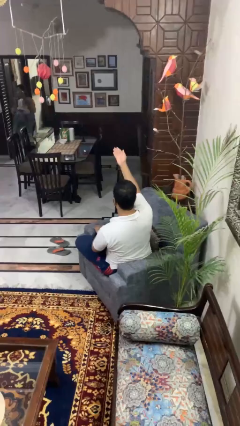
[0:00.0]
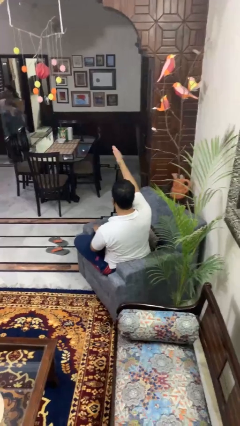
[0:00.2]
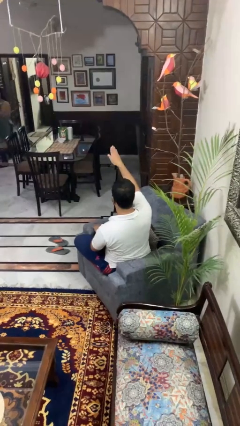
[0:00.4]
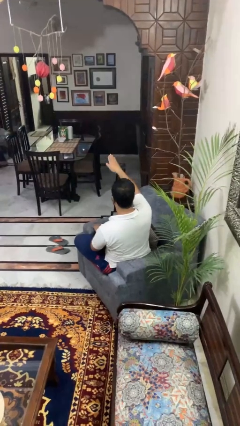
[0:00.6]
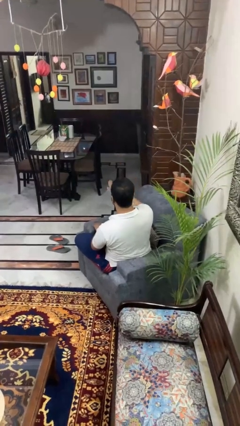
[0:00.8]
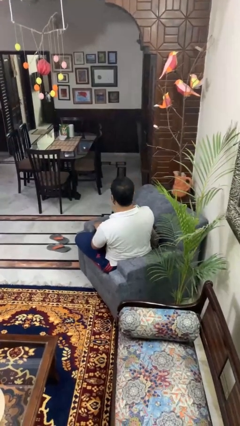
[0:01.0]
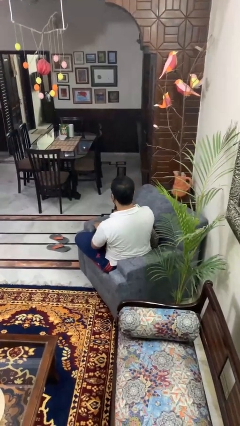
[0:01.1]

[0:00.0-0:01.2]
person gestures swipe down

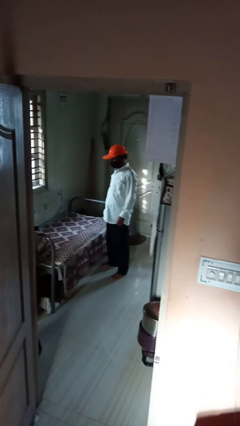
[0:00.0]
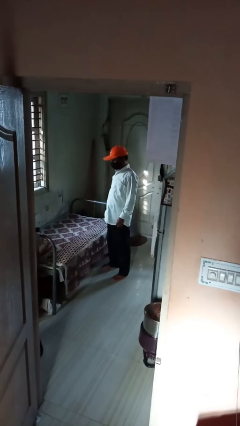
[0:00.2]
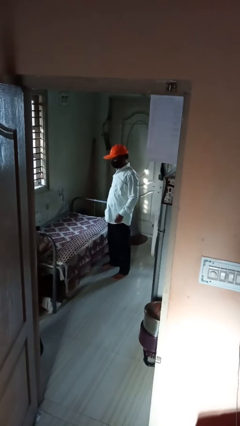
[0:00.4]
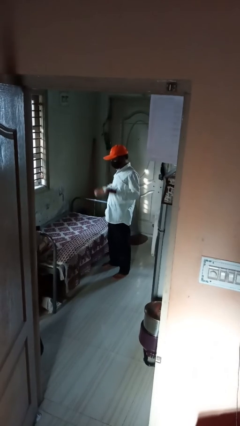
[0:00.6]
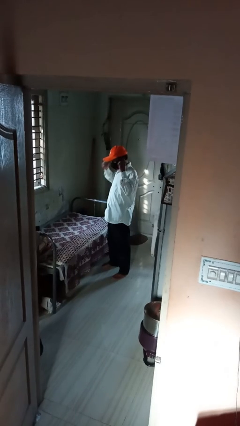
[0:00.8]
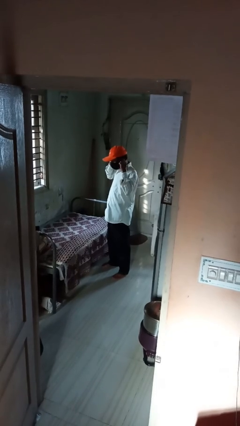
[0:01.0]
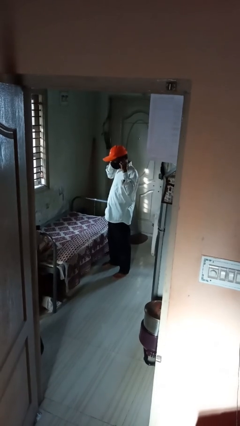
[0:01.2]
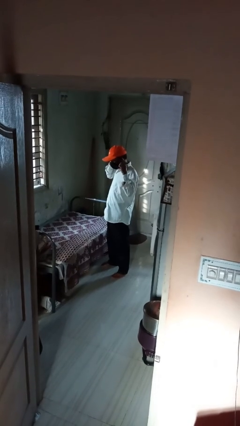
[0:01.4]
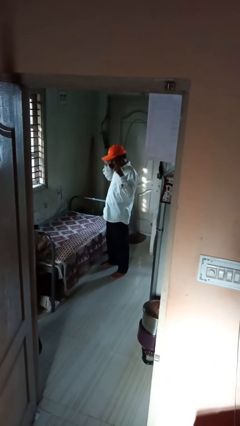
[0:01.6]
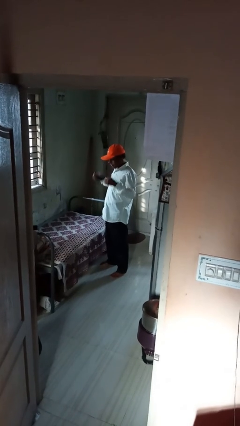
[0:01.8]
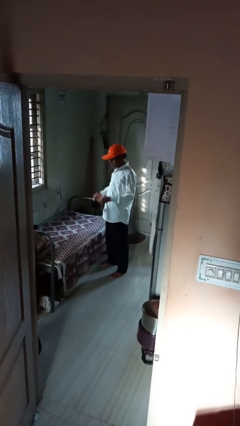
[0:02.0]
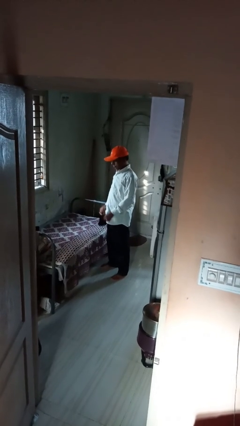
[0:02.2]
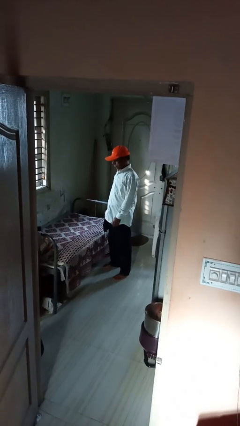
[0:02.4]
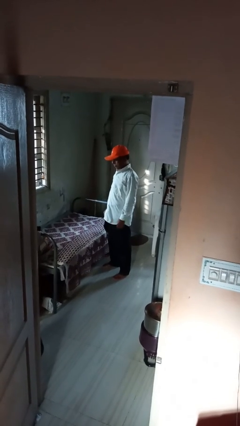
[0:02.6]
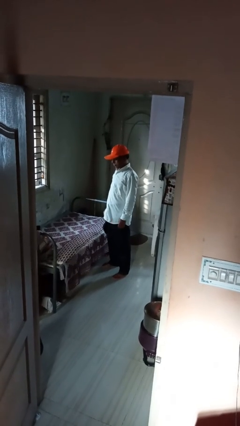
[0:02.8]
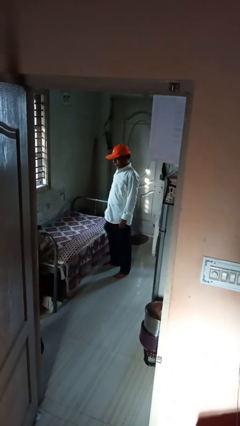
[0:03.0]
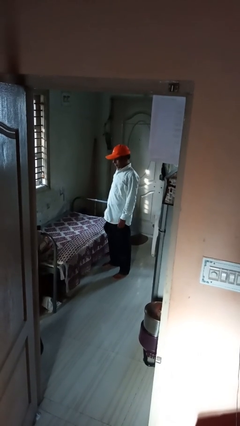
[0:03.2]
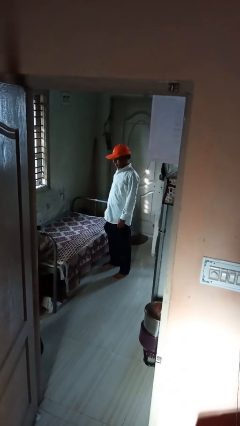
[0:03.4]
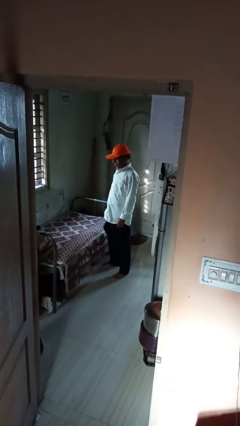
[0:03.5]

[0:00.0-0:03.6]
person takes off facemask

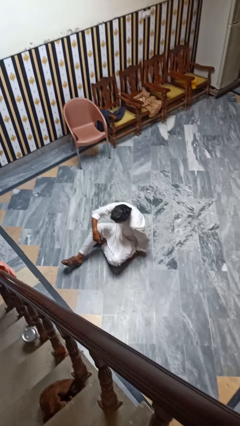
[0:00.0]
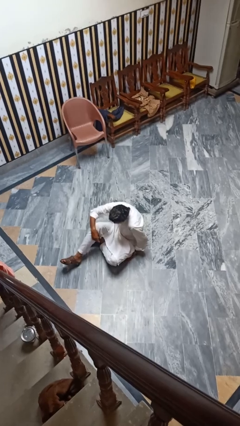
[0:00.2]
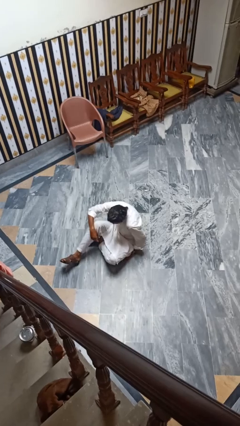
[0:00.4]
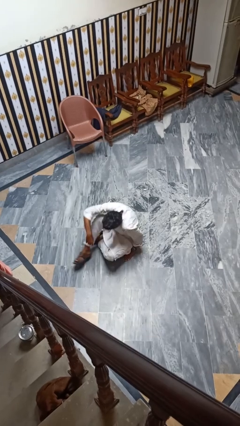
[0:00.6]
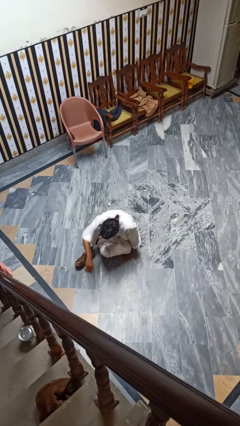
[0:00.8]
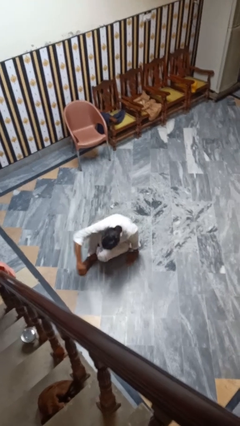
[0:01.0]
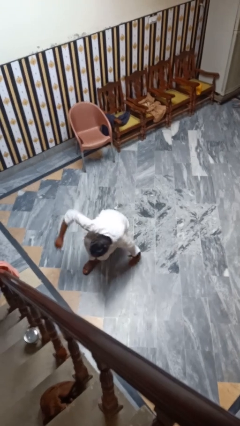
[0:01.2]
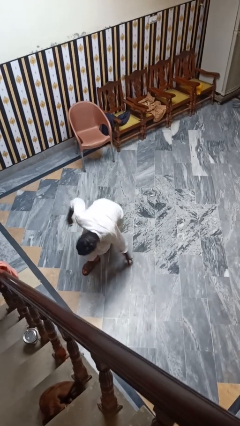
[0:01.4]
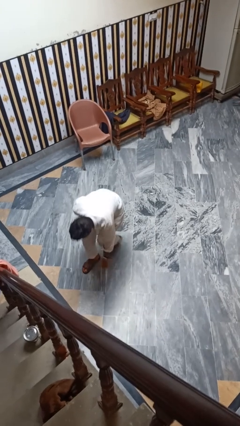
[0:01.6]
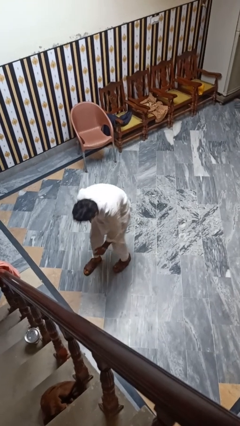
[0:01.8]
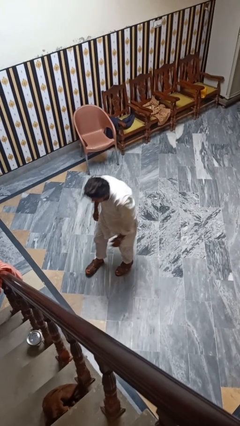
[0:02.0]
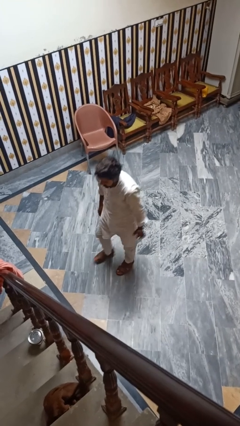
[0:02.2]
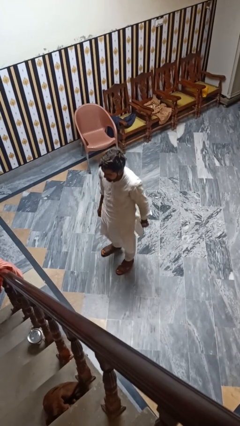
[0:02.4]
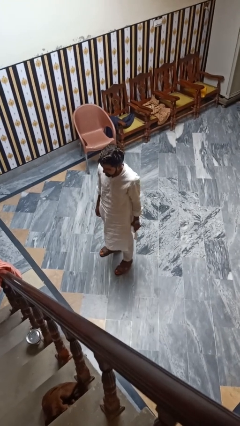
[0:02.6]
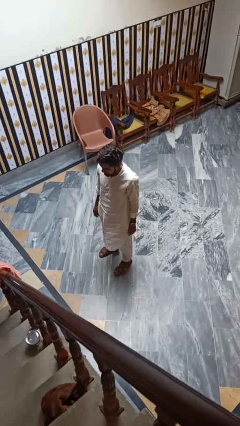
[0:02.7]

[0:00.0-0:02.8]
person stands up from floor

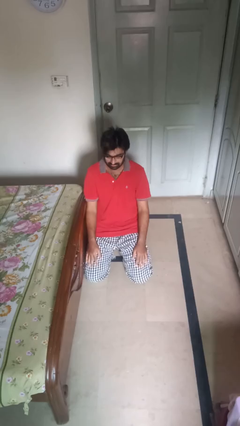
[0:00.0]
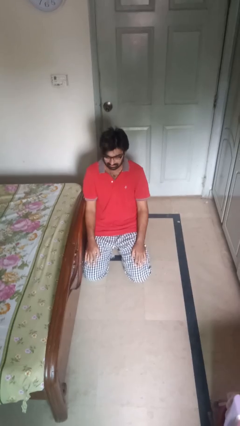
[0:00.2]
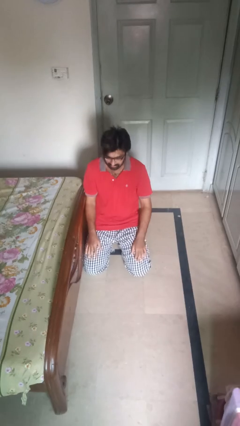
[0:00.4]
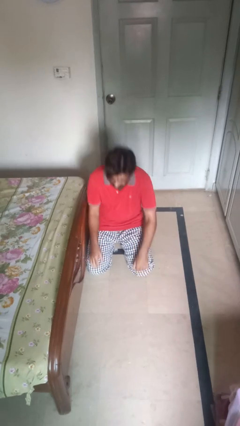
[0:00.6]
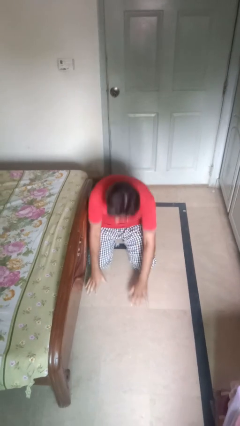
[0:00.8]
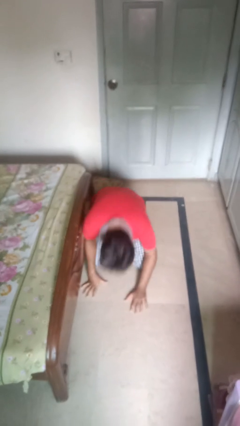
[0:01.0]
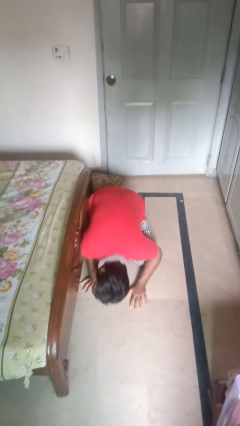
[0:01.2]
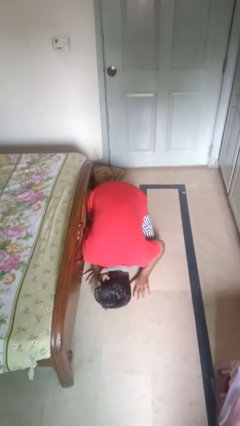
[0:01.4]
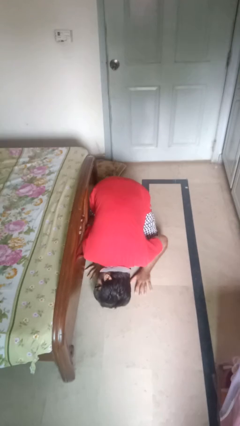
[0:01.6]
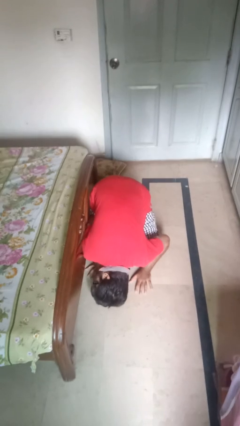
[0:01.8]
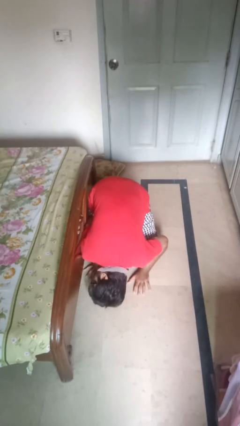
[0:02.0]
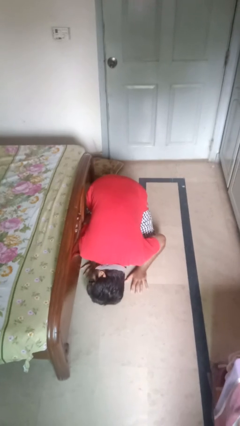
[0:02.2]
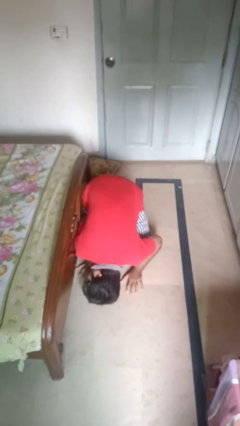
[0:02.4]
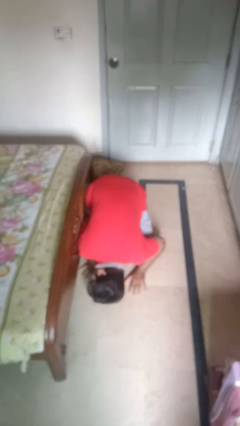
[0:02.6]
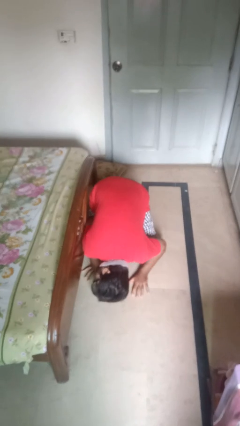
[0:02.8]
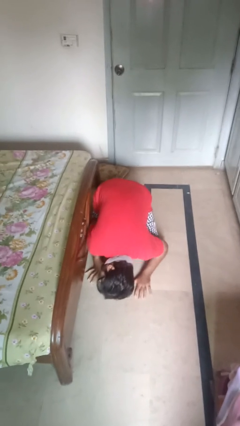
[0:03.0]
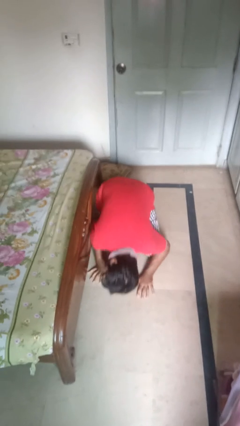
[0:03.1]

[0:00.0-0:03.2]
person searches under bed

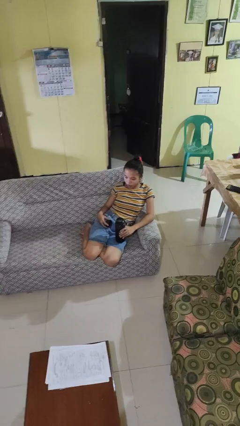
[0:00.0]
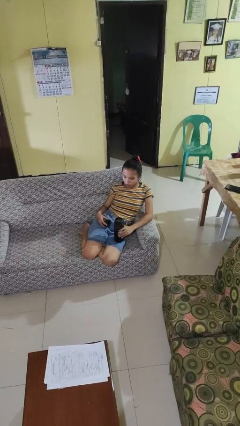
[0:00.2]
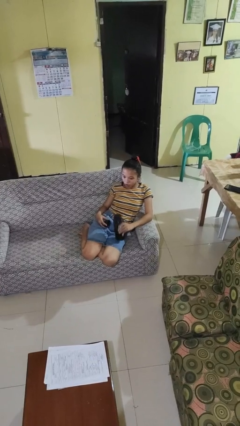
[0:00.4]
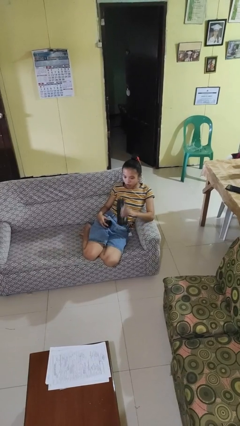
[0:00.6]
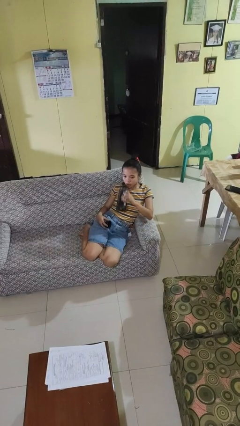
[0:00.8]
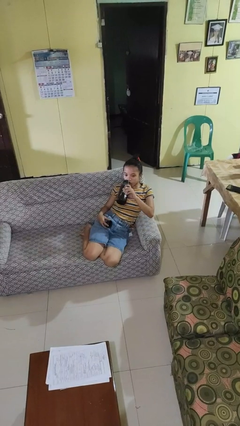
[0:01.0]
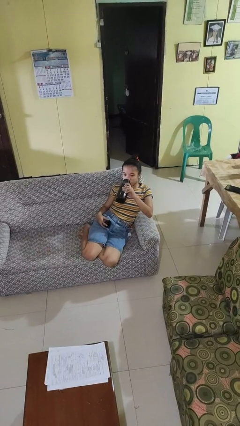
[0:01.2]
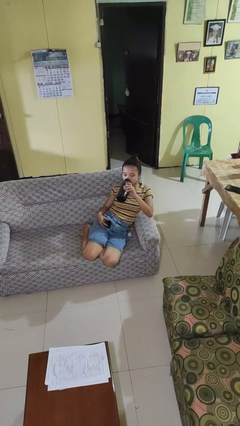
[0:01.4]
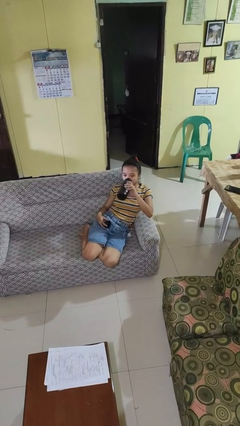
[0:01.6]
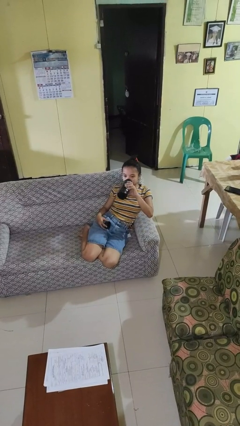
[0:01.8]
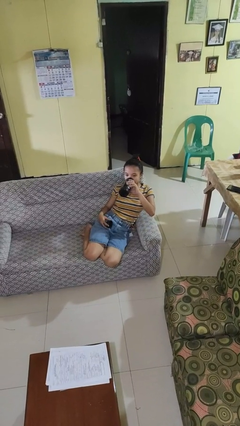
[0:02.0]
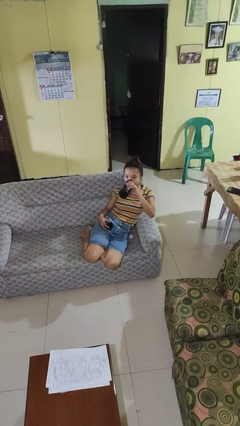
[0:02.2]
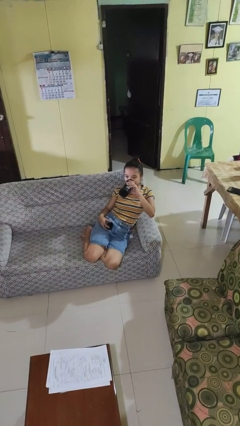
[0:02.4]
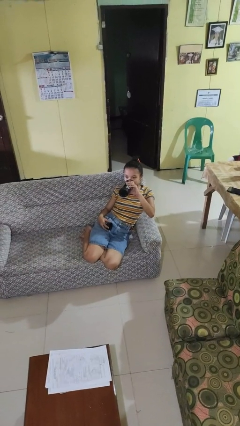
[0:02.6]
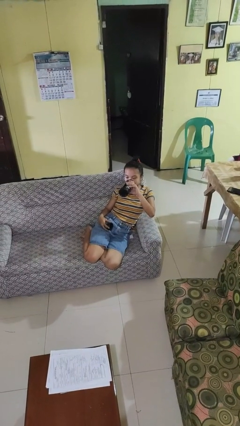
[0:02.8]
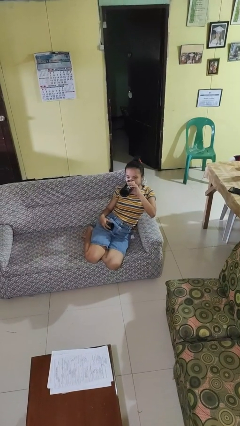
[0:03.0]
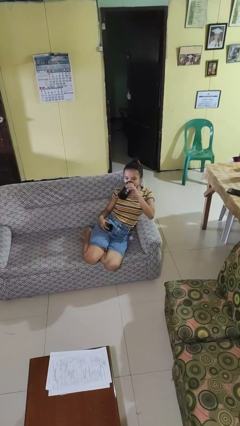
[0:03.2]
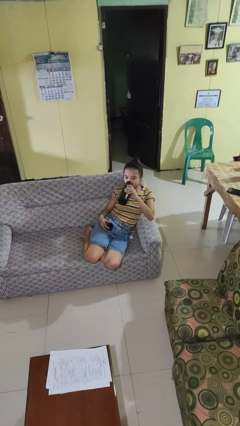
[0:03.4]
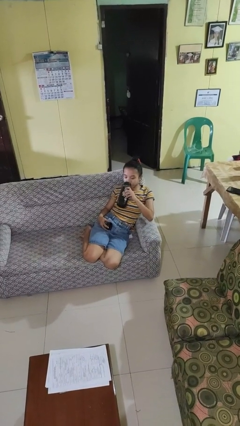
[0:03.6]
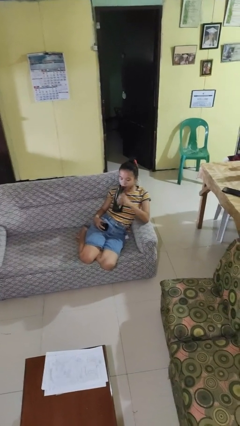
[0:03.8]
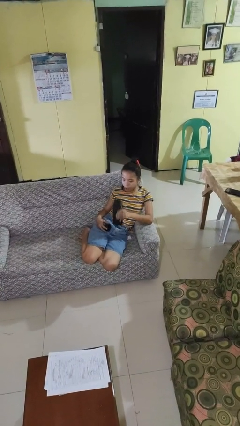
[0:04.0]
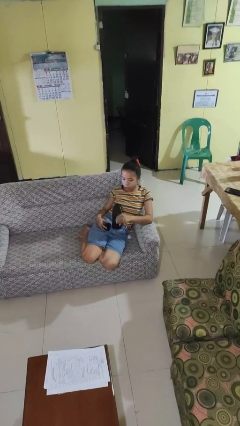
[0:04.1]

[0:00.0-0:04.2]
person drinks from bottle

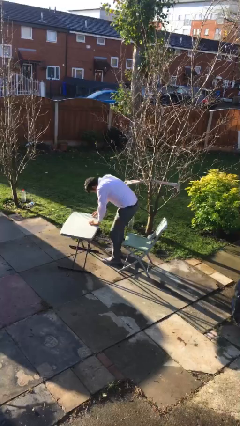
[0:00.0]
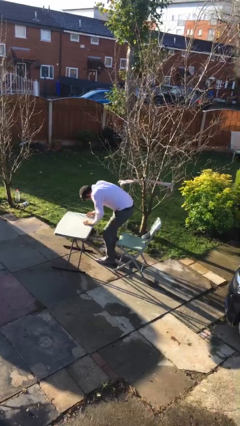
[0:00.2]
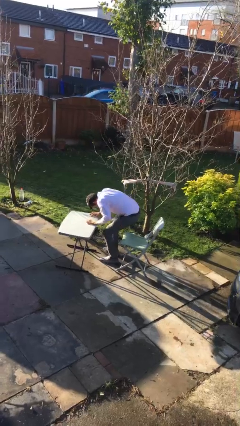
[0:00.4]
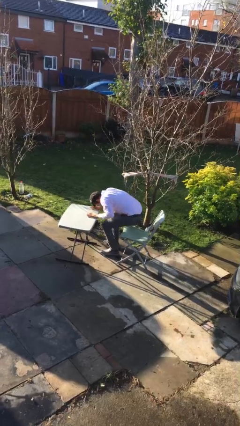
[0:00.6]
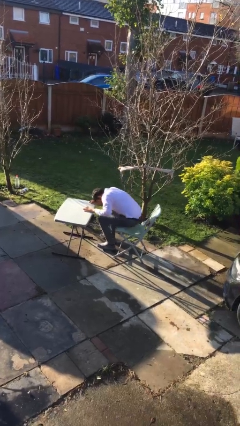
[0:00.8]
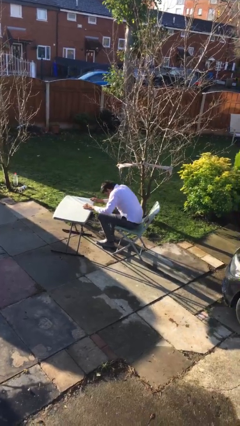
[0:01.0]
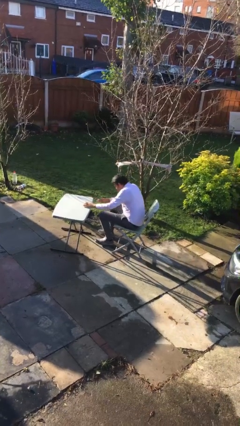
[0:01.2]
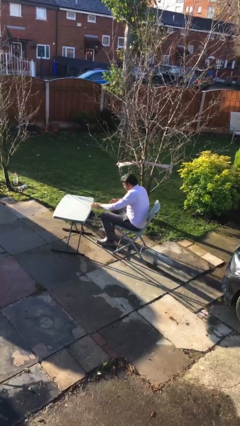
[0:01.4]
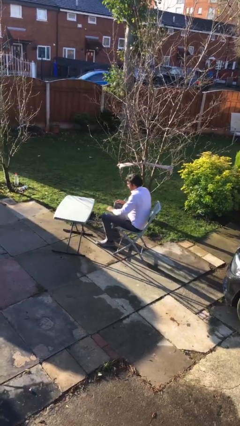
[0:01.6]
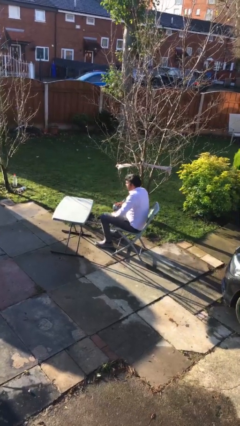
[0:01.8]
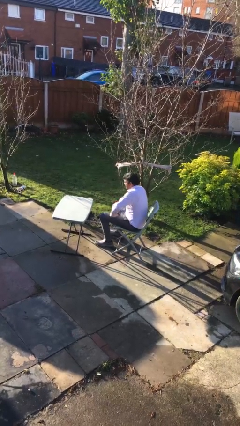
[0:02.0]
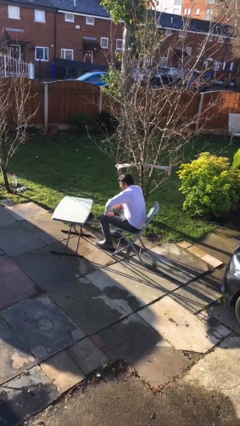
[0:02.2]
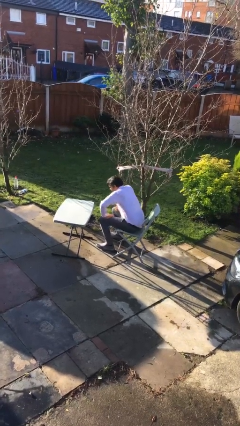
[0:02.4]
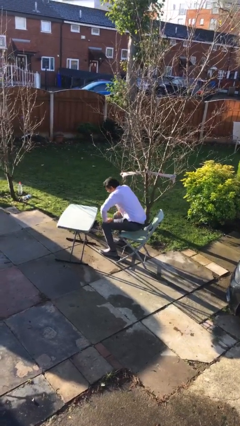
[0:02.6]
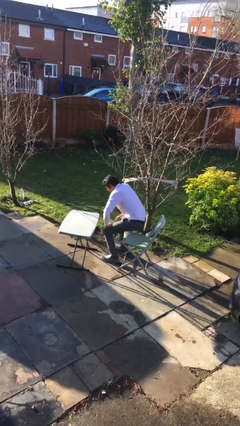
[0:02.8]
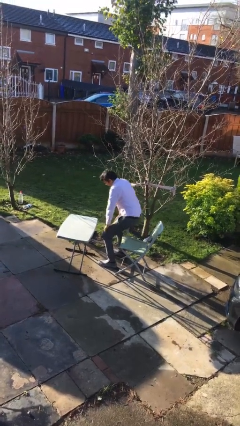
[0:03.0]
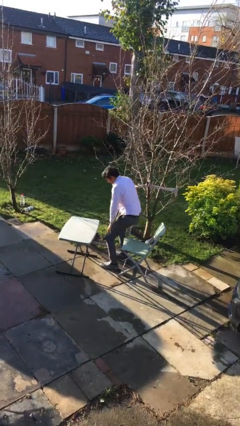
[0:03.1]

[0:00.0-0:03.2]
person sits down
